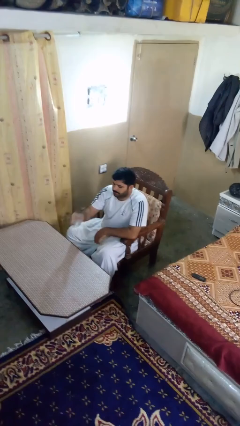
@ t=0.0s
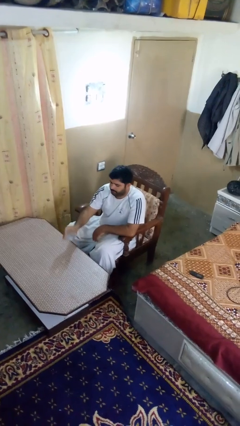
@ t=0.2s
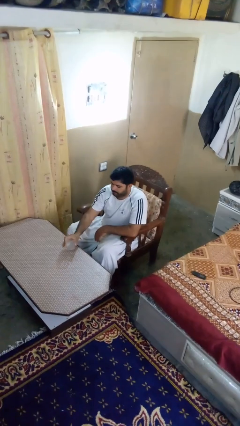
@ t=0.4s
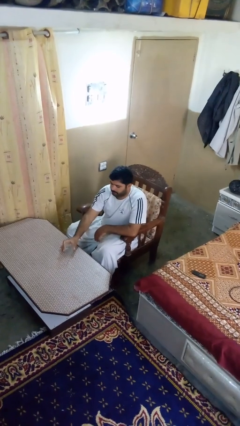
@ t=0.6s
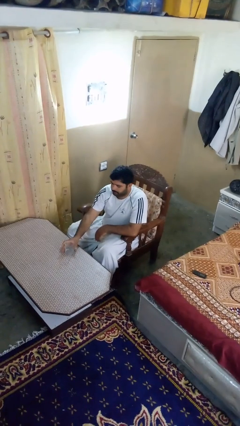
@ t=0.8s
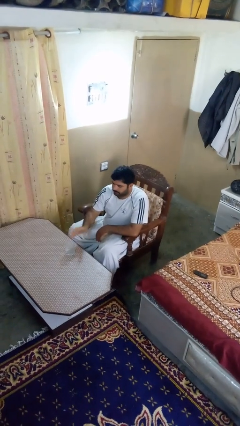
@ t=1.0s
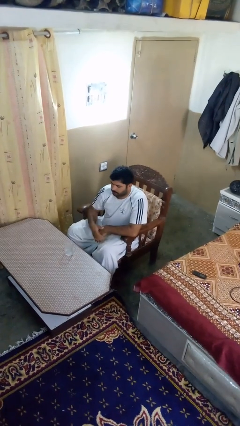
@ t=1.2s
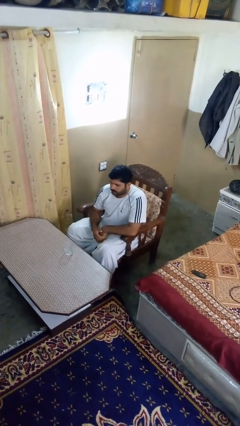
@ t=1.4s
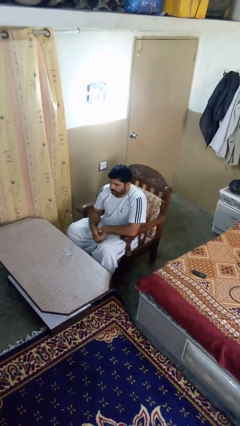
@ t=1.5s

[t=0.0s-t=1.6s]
person puts down object on table

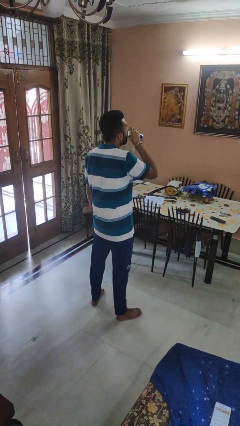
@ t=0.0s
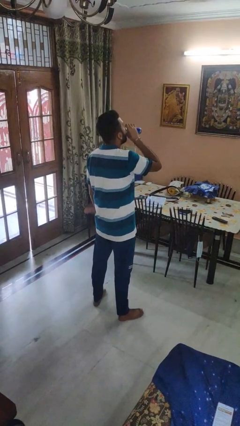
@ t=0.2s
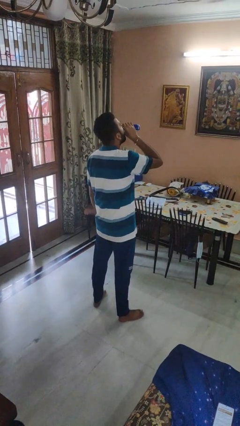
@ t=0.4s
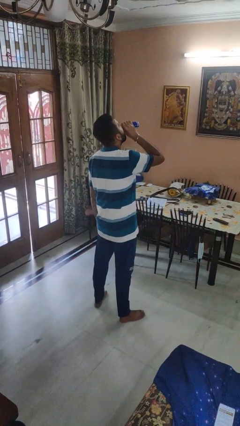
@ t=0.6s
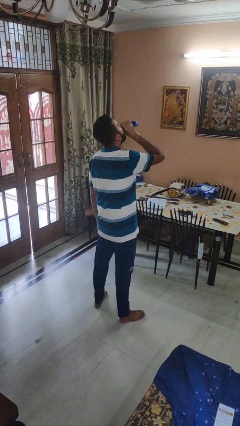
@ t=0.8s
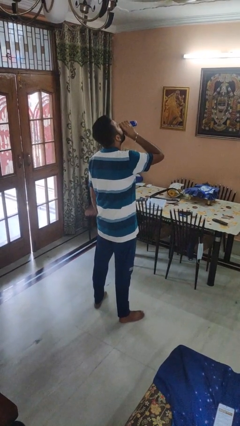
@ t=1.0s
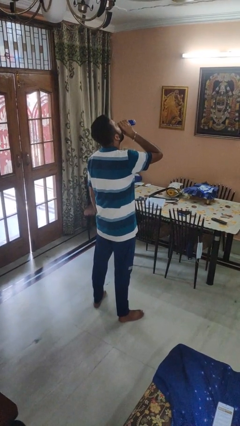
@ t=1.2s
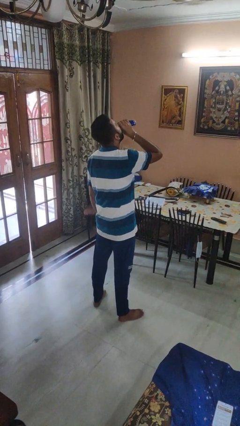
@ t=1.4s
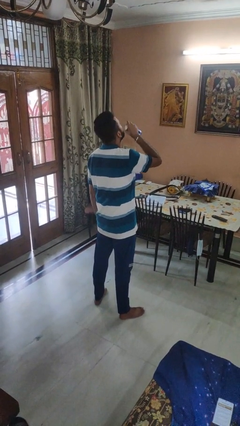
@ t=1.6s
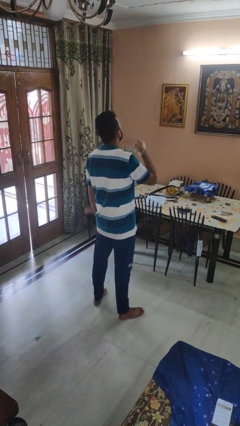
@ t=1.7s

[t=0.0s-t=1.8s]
person drinks from beverage can

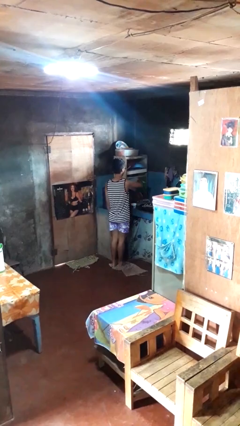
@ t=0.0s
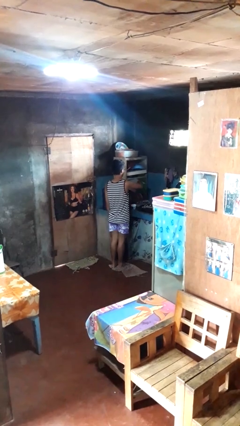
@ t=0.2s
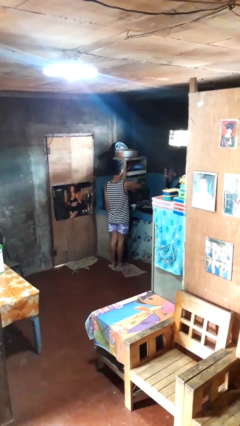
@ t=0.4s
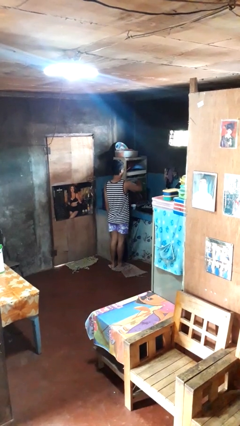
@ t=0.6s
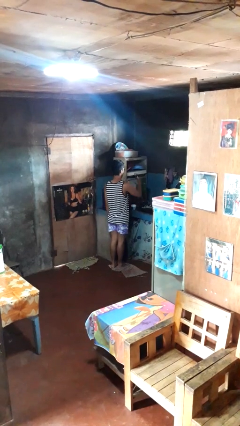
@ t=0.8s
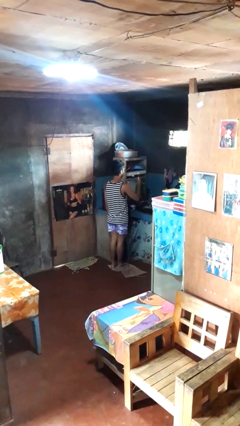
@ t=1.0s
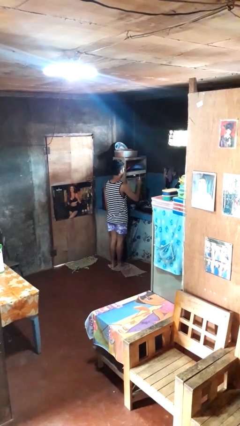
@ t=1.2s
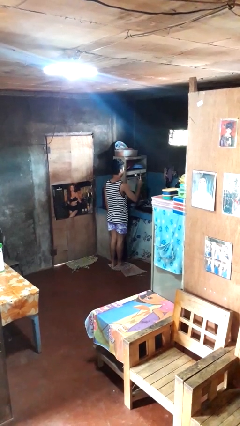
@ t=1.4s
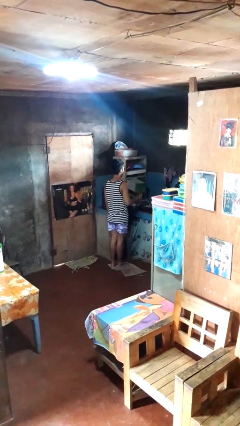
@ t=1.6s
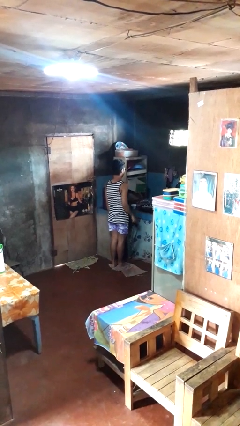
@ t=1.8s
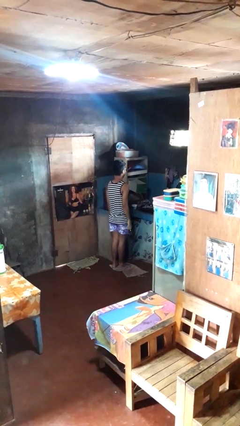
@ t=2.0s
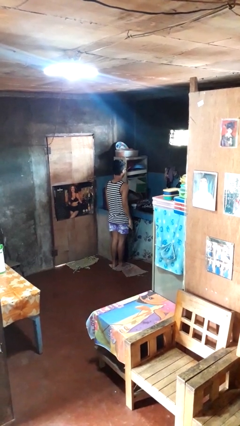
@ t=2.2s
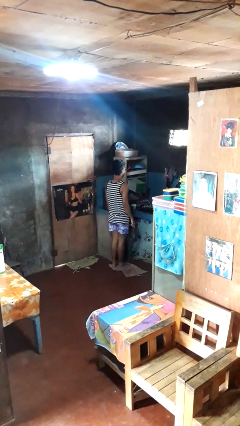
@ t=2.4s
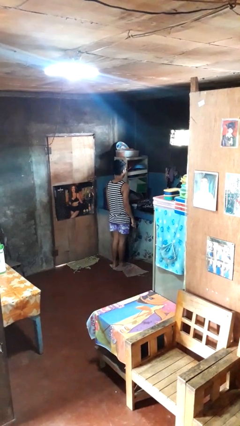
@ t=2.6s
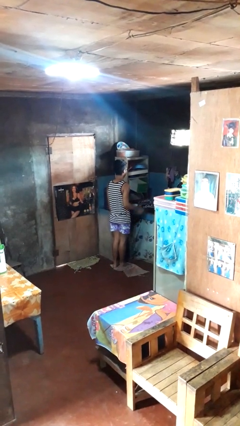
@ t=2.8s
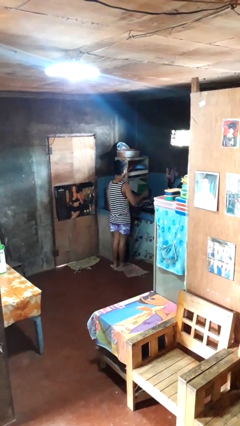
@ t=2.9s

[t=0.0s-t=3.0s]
person takes object from kitchen drawer

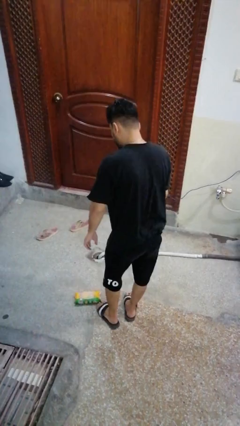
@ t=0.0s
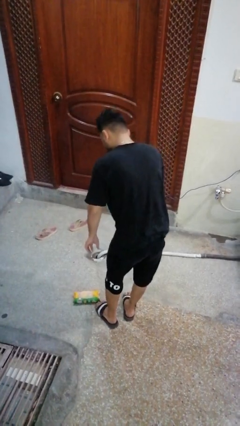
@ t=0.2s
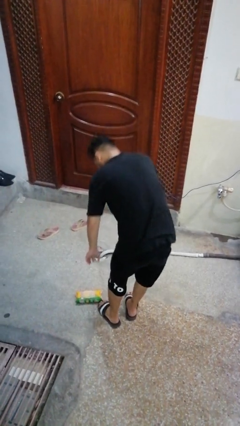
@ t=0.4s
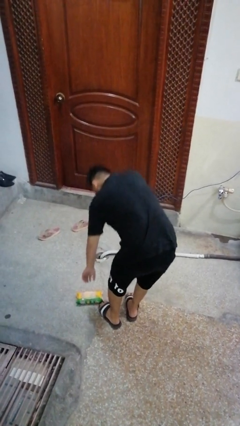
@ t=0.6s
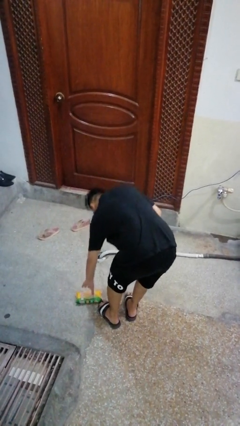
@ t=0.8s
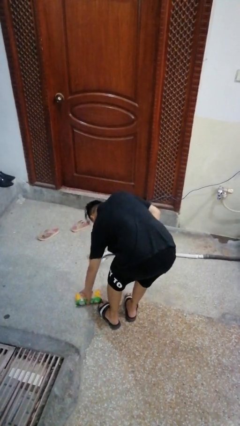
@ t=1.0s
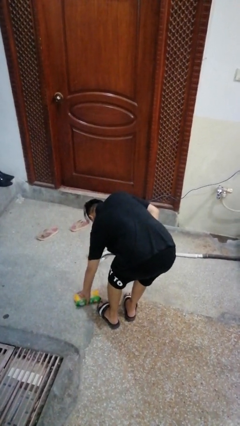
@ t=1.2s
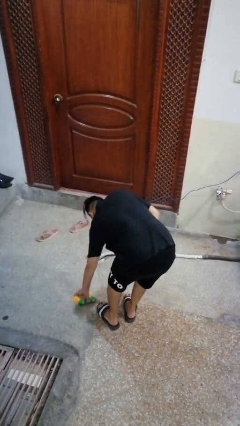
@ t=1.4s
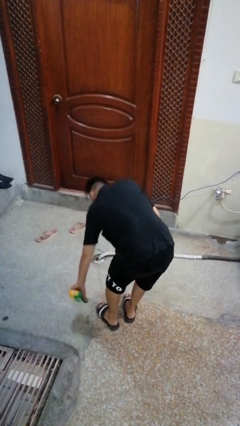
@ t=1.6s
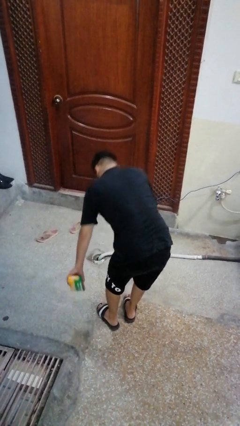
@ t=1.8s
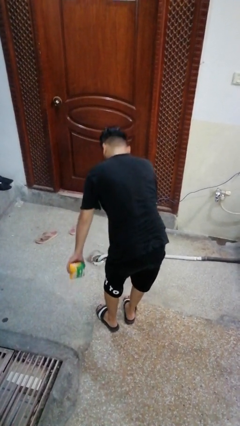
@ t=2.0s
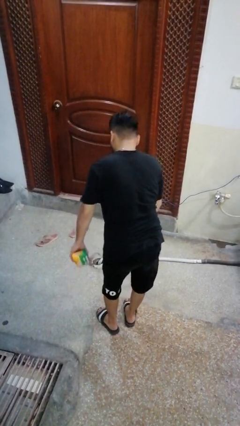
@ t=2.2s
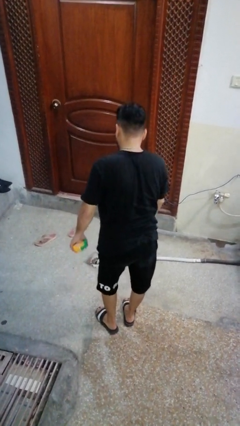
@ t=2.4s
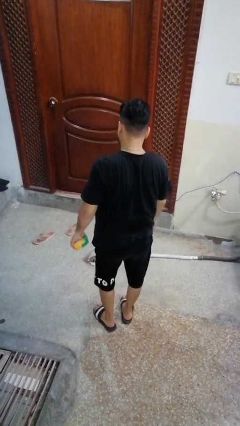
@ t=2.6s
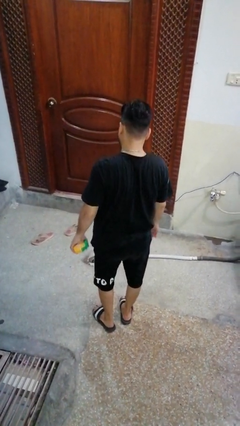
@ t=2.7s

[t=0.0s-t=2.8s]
person picks up object from floor

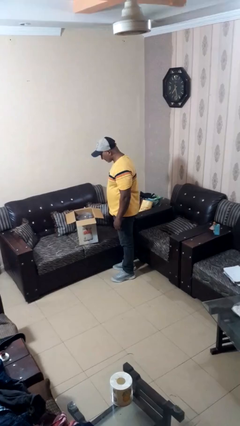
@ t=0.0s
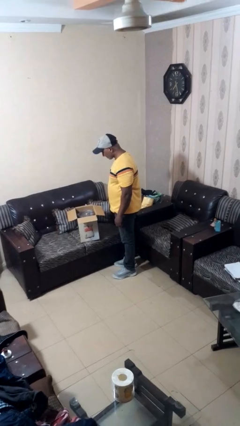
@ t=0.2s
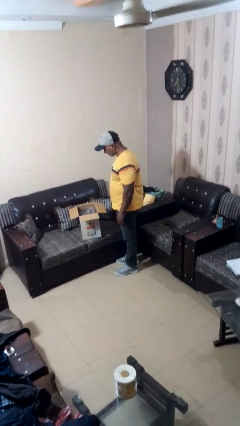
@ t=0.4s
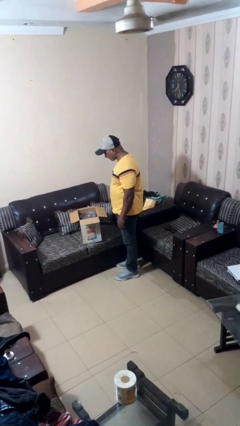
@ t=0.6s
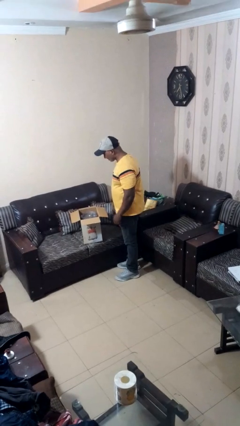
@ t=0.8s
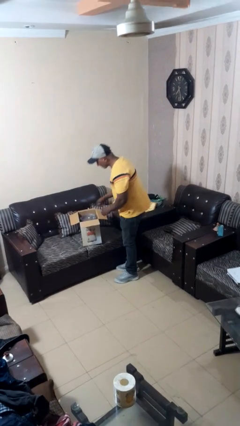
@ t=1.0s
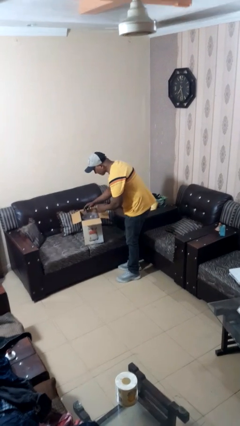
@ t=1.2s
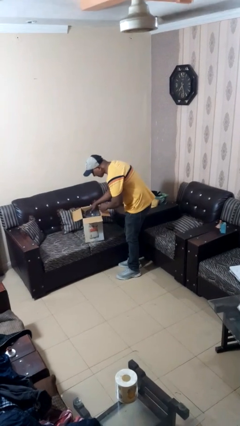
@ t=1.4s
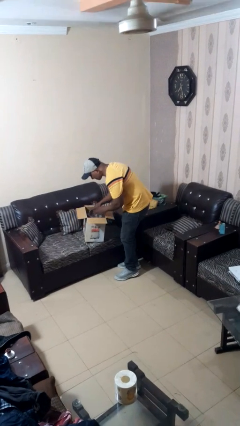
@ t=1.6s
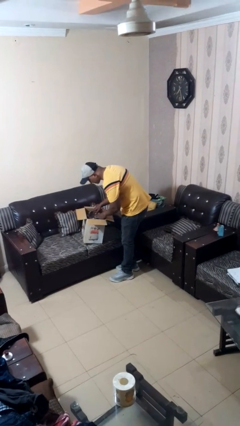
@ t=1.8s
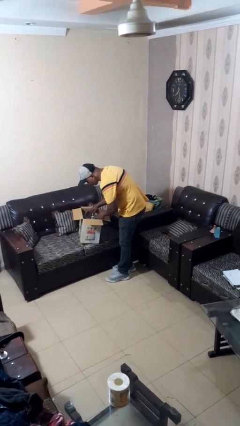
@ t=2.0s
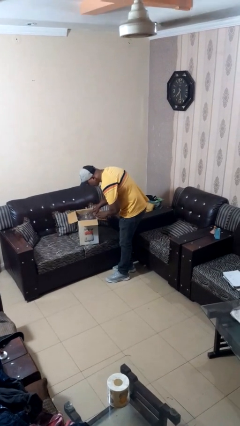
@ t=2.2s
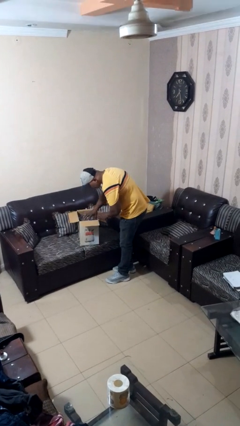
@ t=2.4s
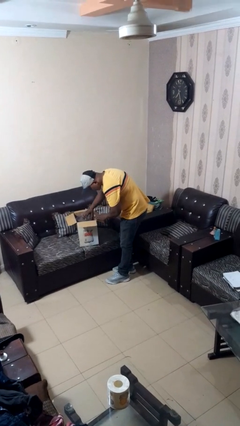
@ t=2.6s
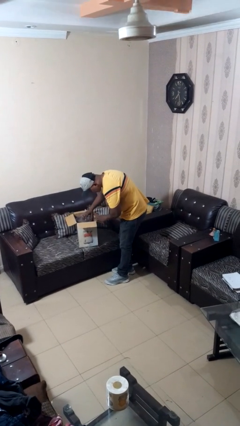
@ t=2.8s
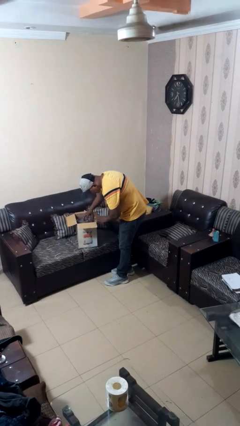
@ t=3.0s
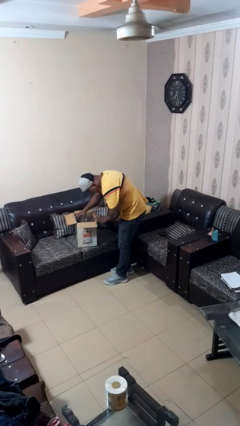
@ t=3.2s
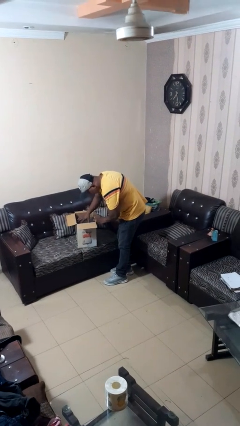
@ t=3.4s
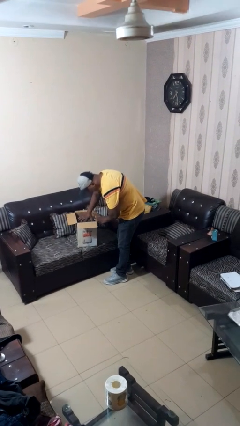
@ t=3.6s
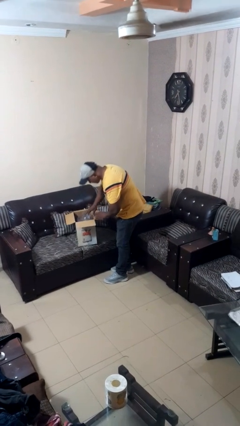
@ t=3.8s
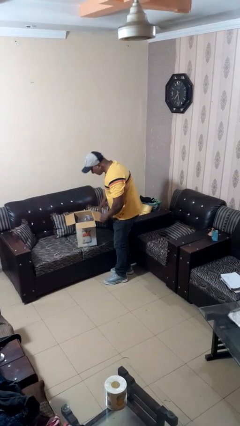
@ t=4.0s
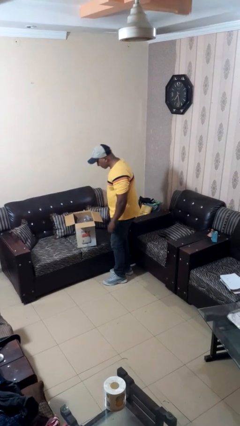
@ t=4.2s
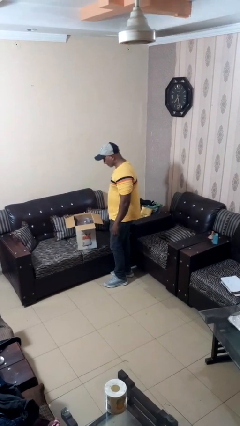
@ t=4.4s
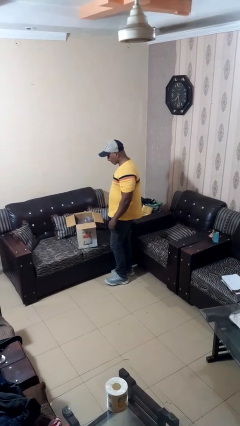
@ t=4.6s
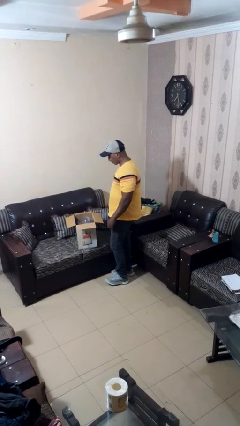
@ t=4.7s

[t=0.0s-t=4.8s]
person searches in box

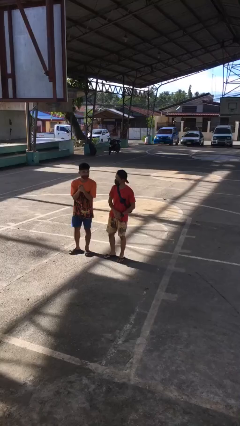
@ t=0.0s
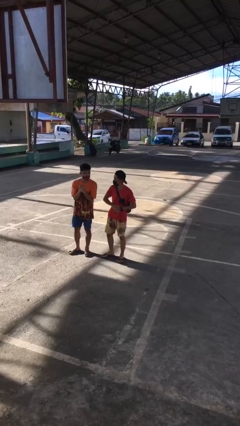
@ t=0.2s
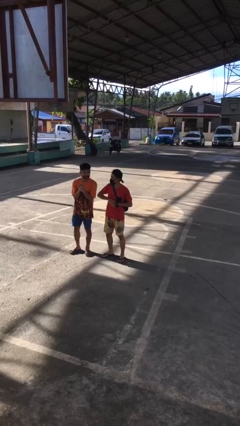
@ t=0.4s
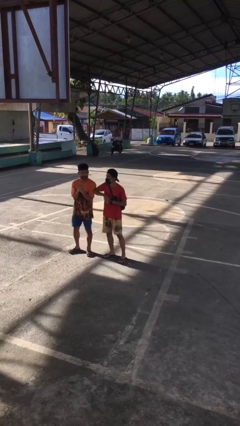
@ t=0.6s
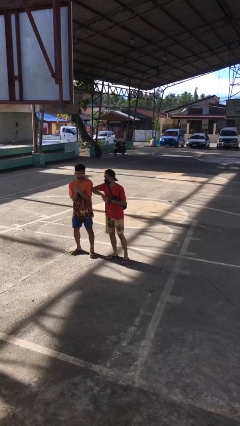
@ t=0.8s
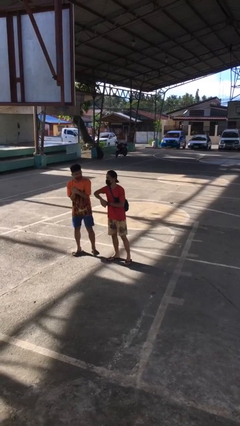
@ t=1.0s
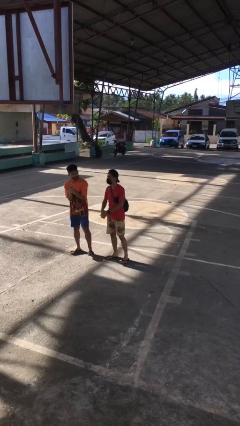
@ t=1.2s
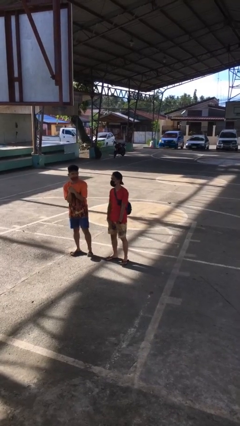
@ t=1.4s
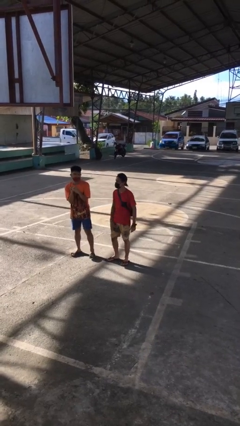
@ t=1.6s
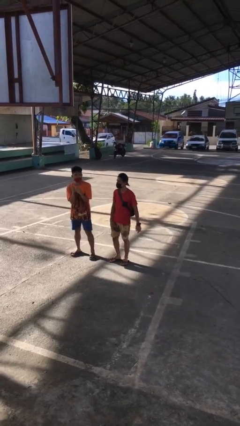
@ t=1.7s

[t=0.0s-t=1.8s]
person nudges person with elbow

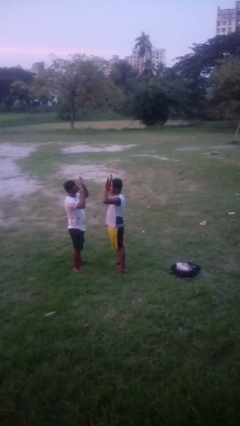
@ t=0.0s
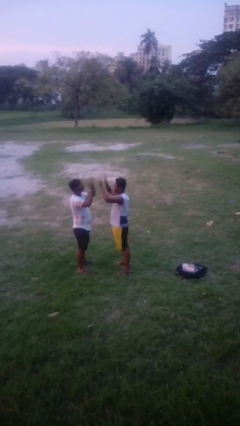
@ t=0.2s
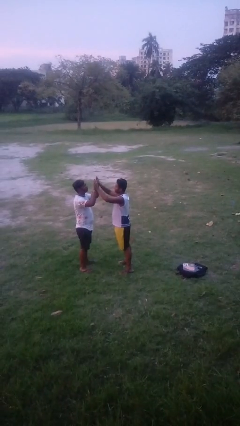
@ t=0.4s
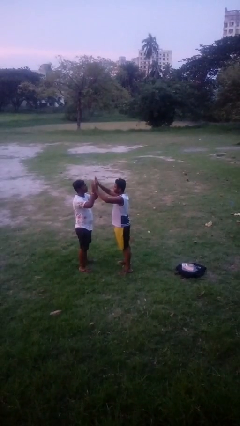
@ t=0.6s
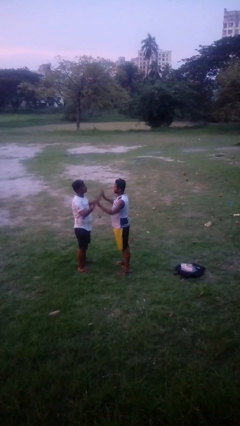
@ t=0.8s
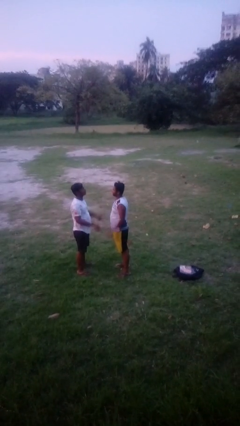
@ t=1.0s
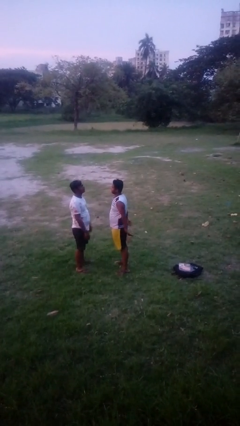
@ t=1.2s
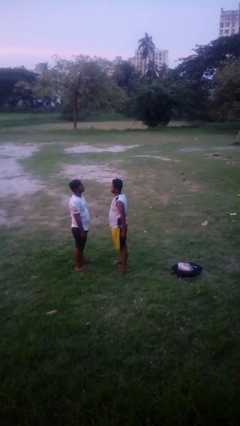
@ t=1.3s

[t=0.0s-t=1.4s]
person highfives hand
